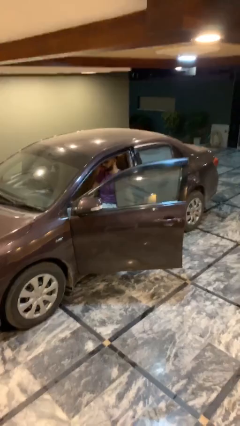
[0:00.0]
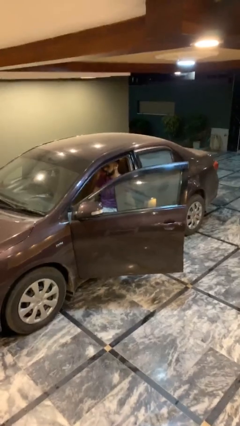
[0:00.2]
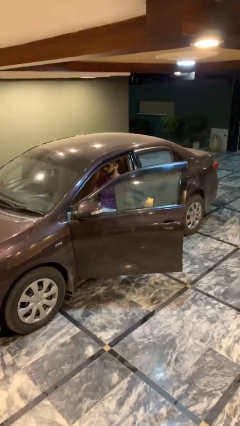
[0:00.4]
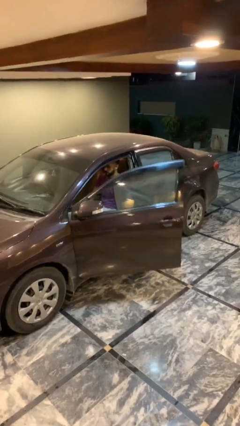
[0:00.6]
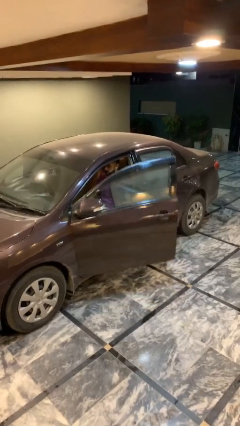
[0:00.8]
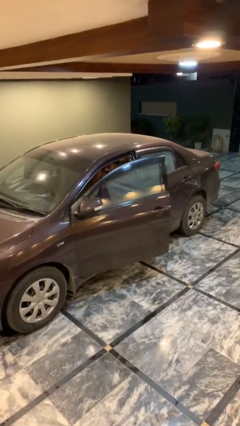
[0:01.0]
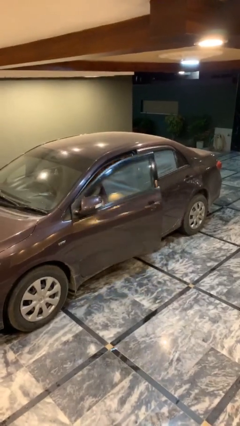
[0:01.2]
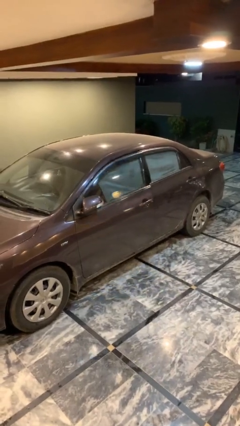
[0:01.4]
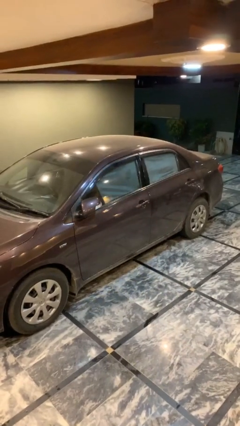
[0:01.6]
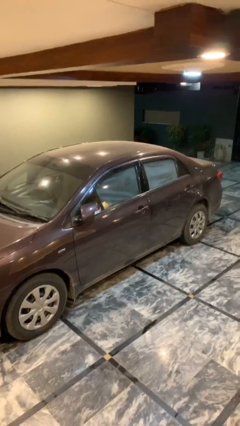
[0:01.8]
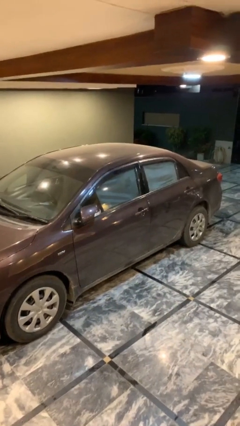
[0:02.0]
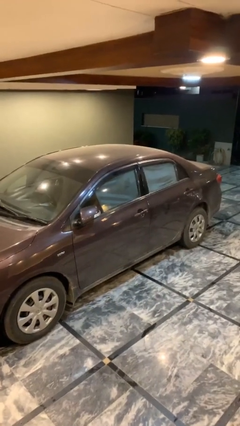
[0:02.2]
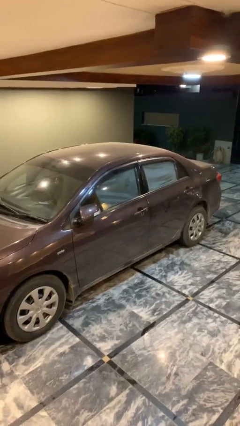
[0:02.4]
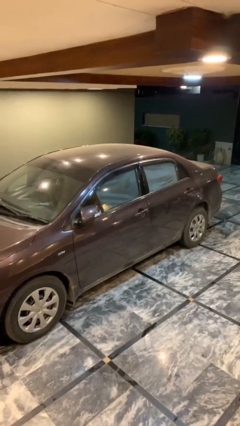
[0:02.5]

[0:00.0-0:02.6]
person closes car door

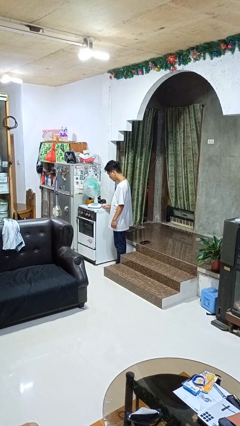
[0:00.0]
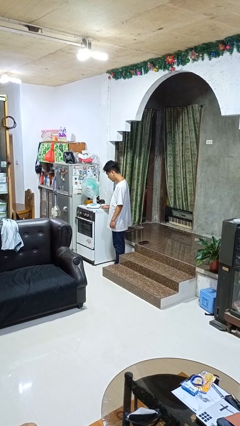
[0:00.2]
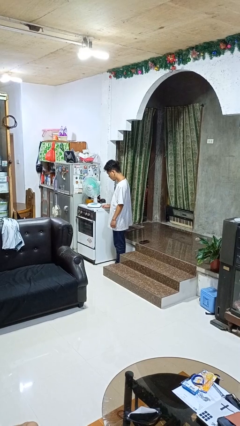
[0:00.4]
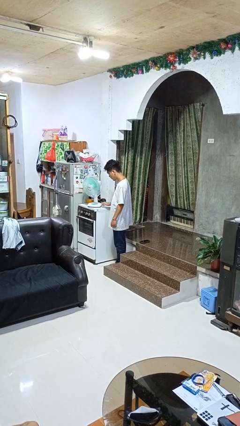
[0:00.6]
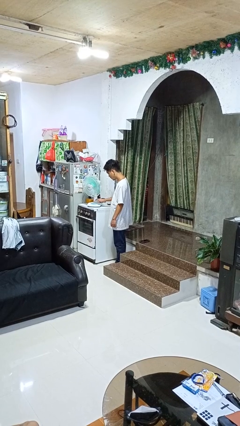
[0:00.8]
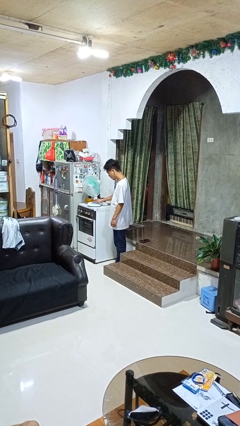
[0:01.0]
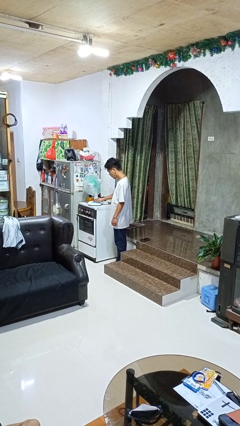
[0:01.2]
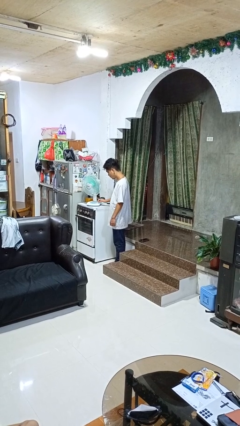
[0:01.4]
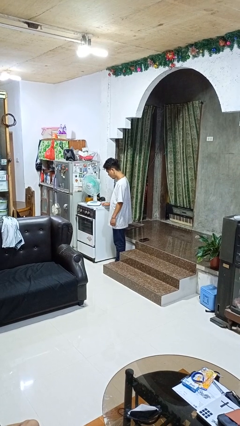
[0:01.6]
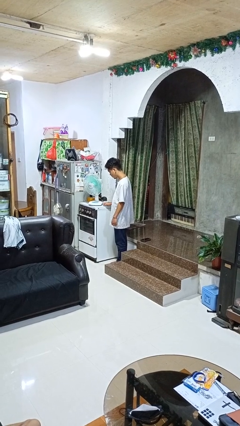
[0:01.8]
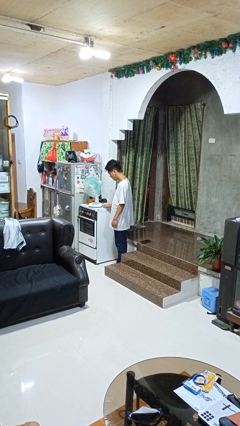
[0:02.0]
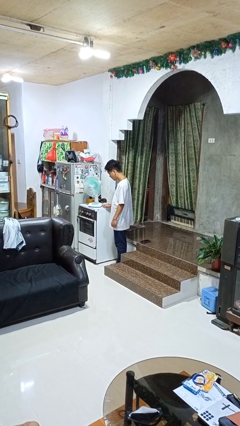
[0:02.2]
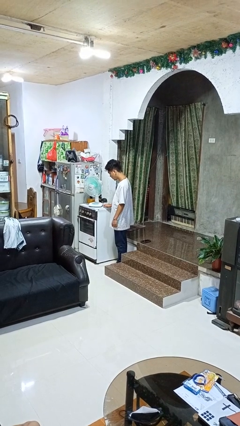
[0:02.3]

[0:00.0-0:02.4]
person turns on fan

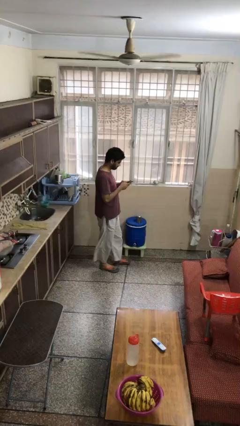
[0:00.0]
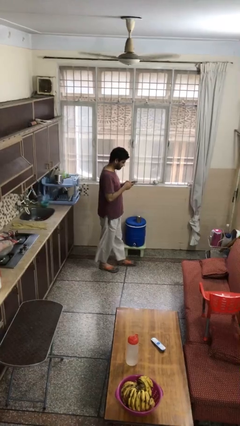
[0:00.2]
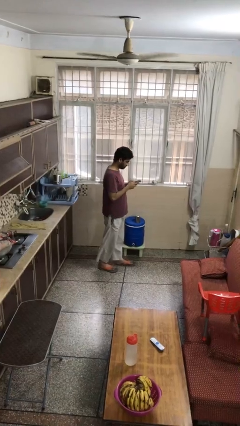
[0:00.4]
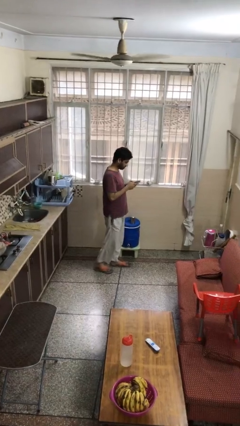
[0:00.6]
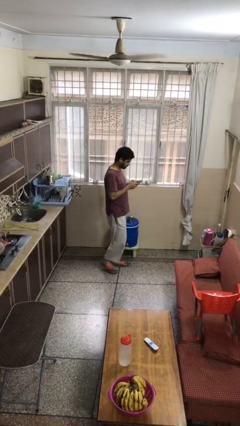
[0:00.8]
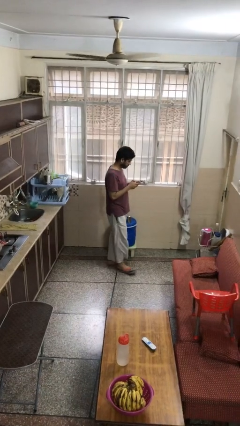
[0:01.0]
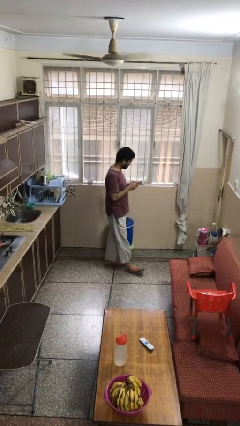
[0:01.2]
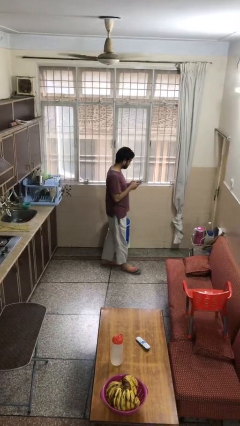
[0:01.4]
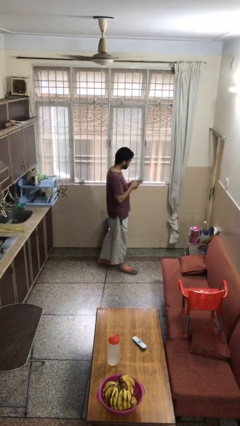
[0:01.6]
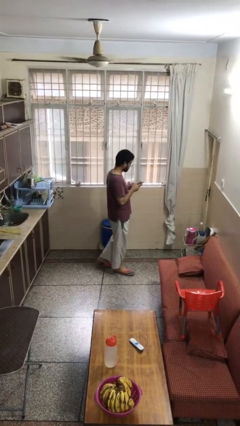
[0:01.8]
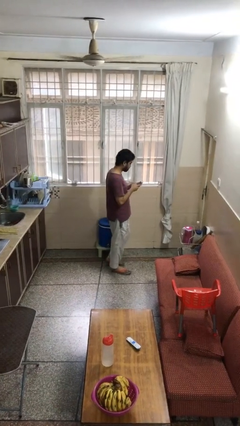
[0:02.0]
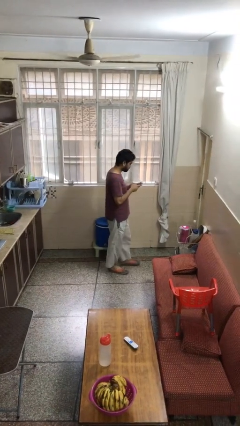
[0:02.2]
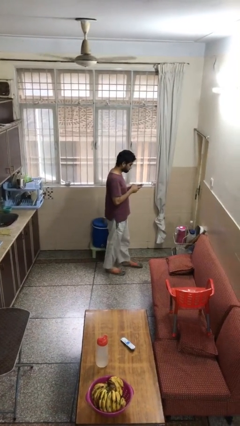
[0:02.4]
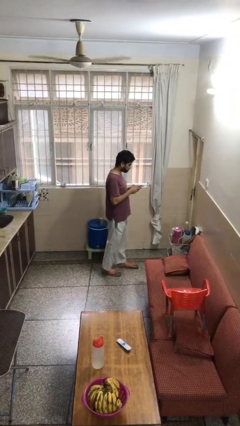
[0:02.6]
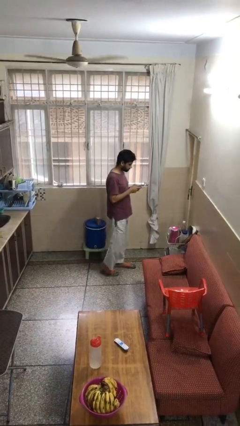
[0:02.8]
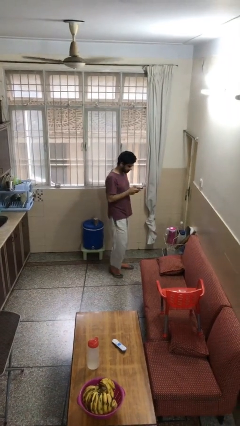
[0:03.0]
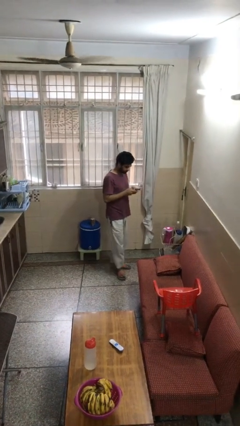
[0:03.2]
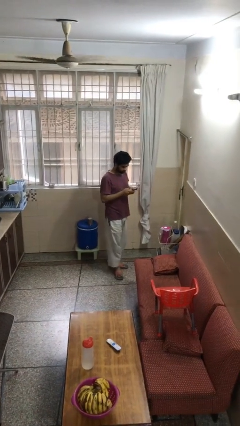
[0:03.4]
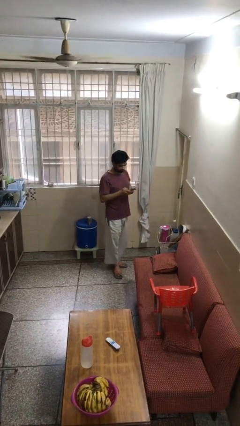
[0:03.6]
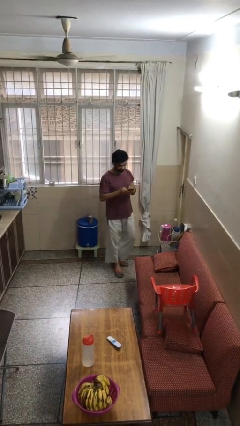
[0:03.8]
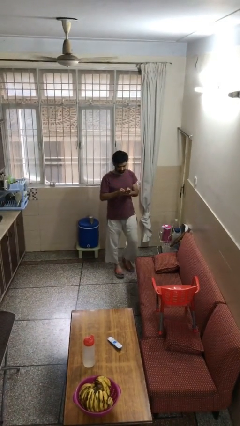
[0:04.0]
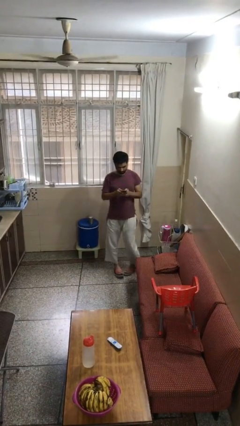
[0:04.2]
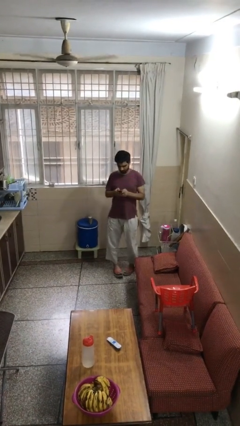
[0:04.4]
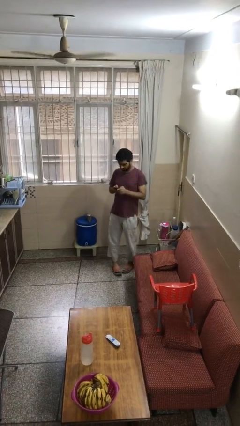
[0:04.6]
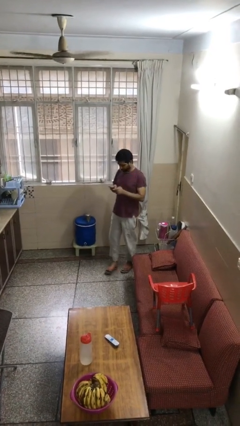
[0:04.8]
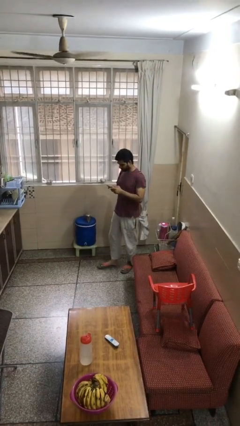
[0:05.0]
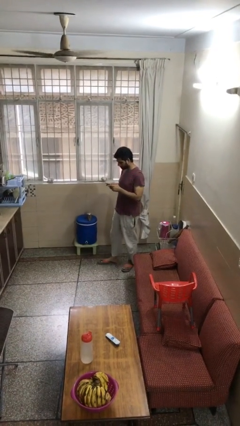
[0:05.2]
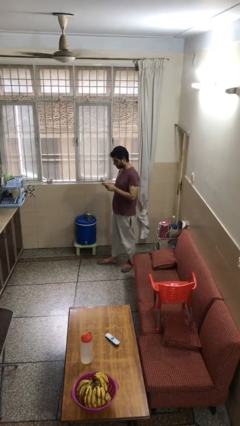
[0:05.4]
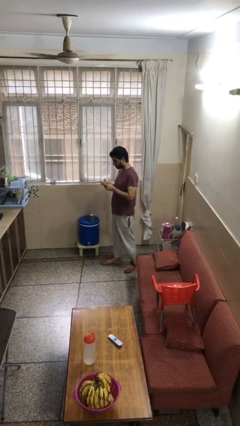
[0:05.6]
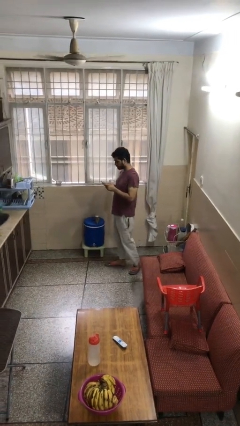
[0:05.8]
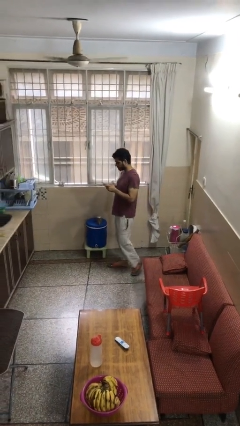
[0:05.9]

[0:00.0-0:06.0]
person texts on phone

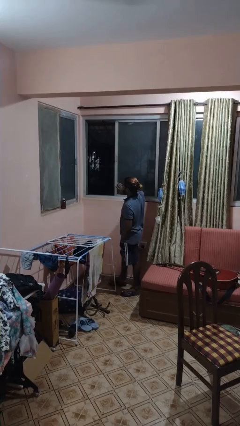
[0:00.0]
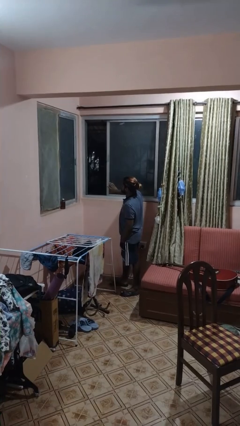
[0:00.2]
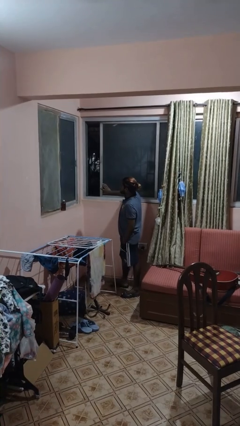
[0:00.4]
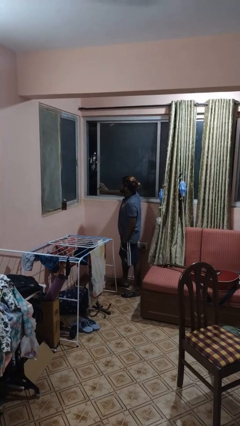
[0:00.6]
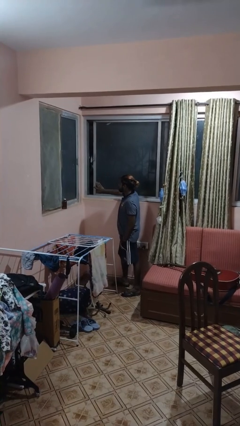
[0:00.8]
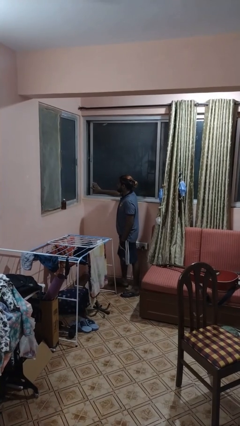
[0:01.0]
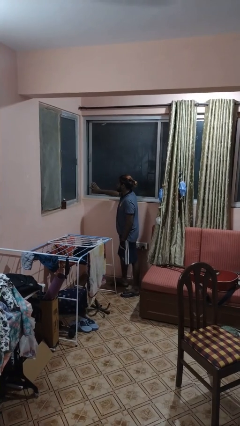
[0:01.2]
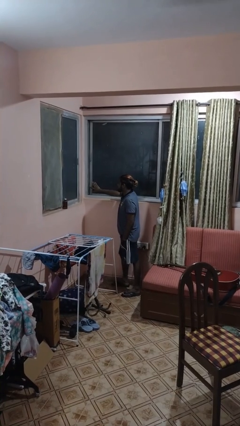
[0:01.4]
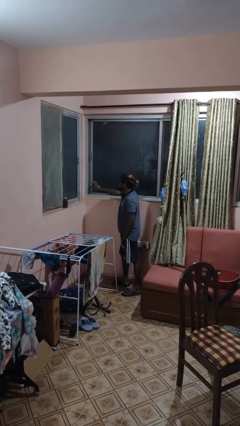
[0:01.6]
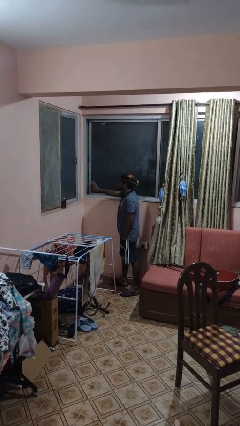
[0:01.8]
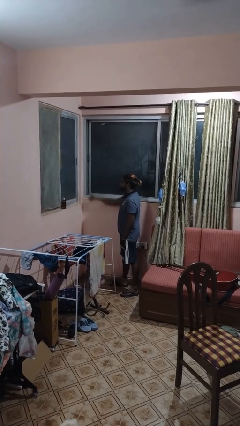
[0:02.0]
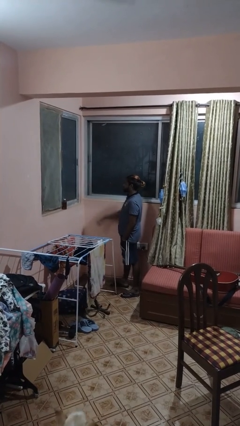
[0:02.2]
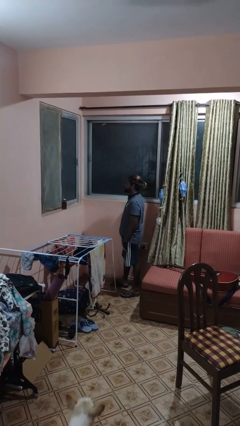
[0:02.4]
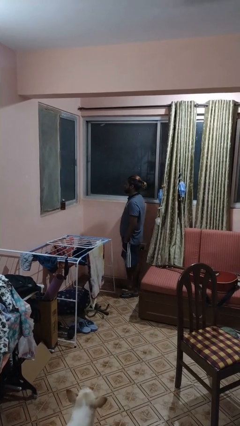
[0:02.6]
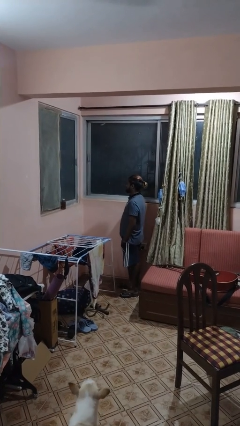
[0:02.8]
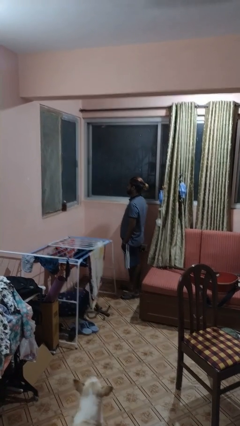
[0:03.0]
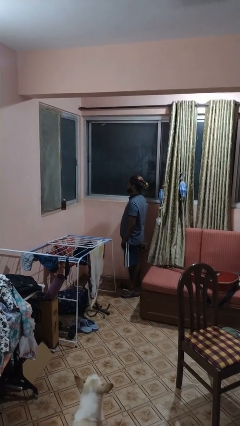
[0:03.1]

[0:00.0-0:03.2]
person closes sliding door

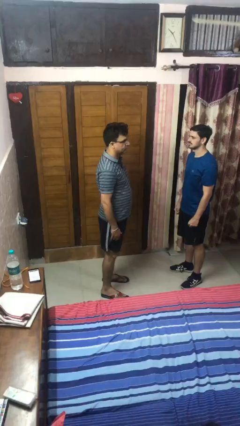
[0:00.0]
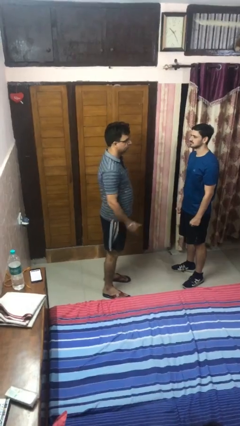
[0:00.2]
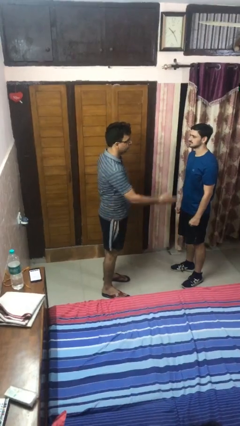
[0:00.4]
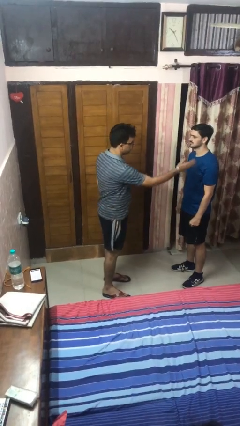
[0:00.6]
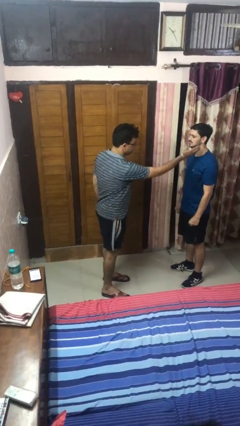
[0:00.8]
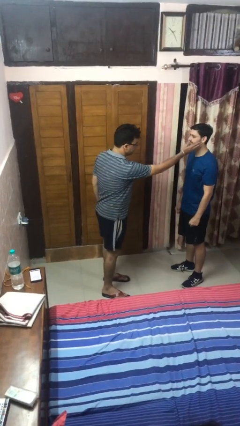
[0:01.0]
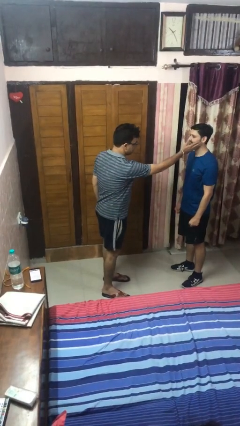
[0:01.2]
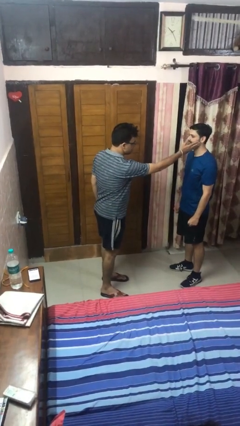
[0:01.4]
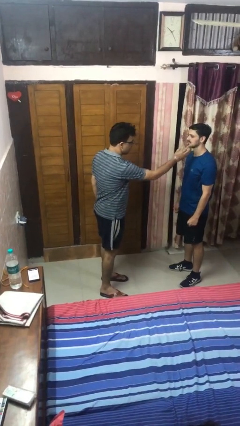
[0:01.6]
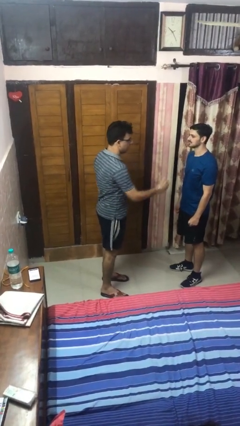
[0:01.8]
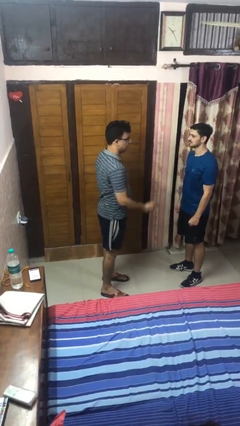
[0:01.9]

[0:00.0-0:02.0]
person touches face of person

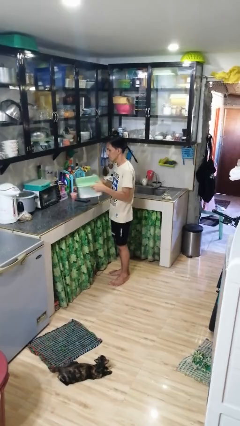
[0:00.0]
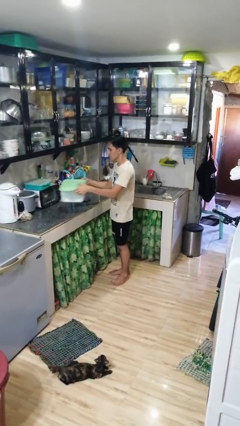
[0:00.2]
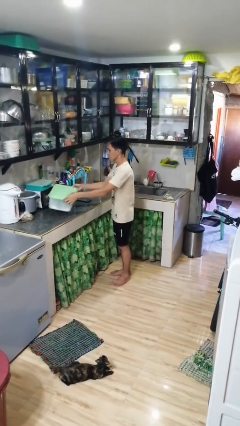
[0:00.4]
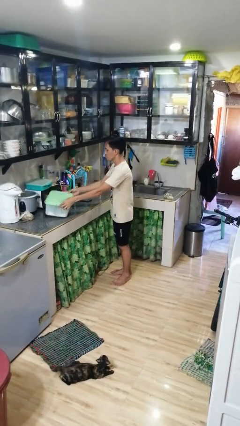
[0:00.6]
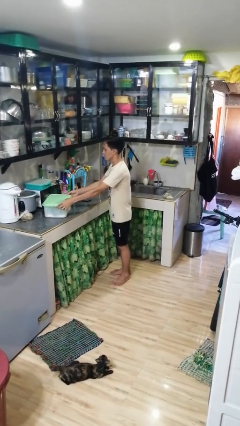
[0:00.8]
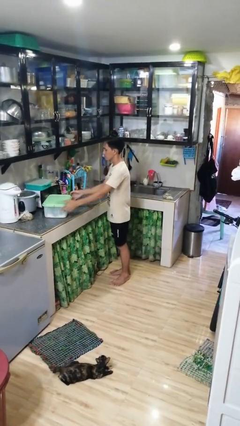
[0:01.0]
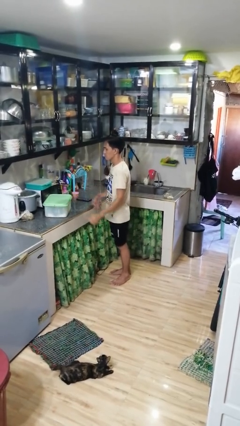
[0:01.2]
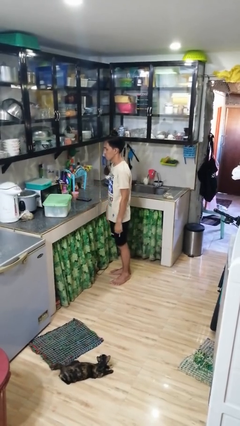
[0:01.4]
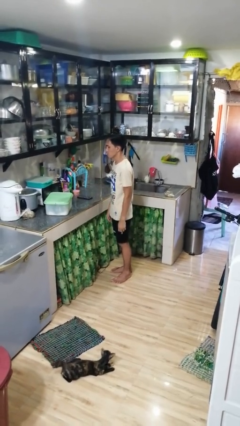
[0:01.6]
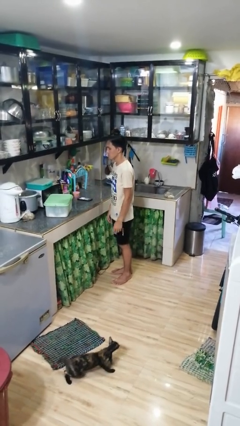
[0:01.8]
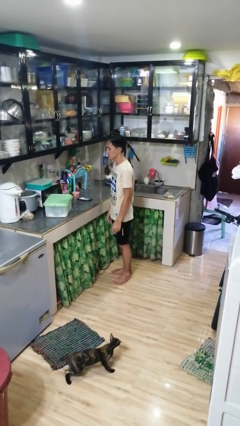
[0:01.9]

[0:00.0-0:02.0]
person puts down object on countertop
